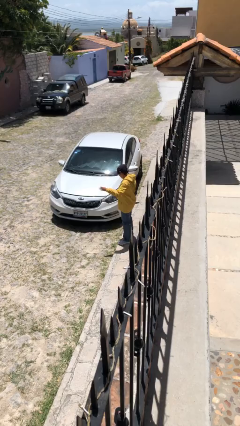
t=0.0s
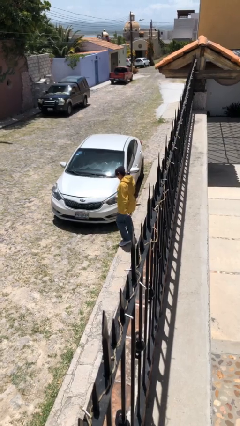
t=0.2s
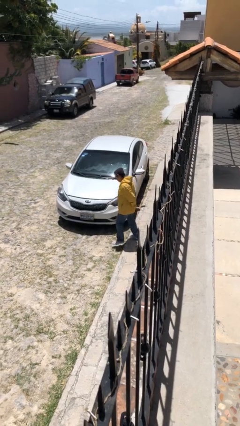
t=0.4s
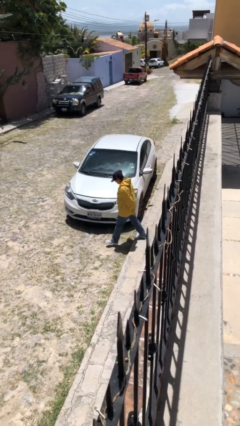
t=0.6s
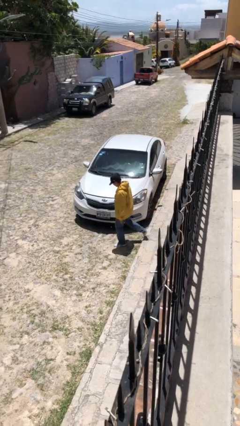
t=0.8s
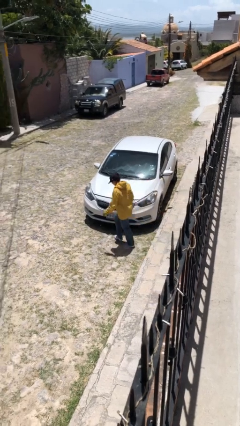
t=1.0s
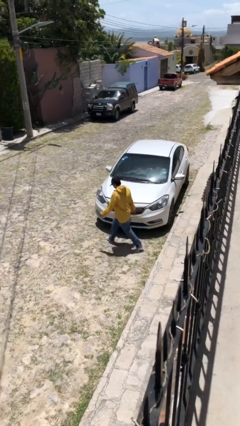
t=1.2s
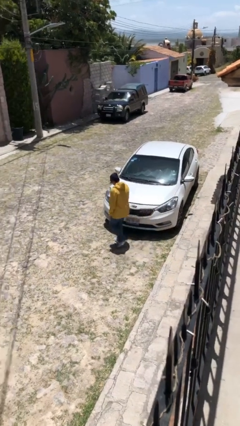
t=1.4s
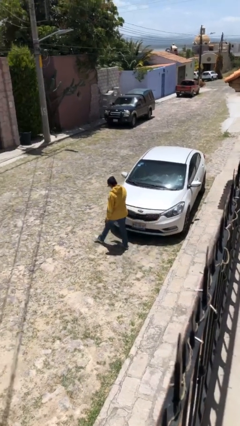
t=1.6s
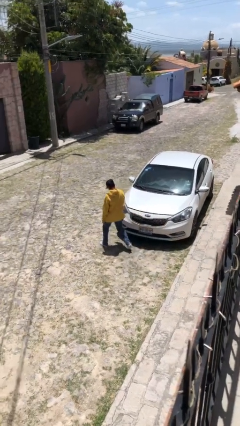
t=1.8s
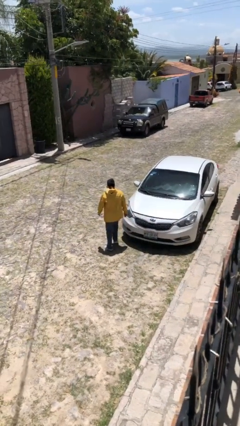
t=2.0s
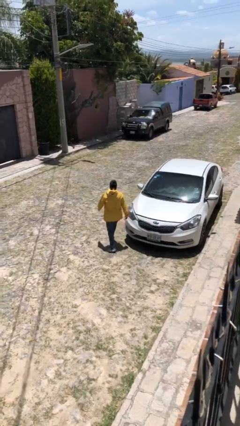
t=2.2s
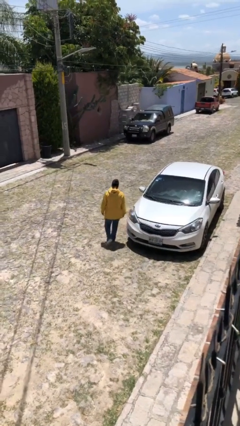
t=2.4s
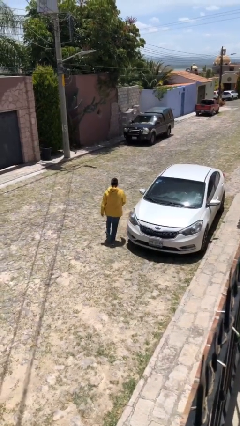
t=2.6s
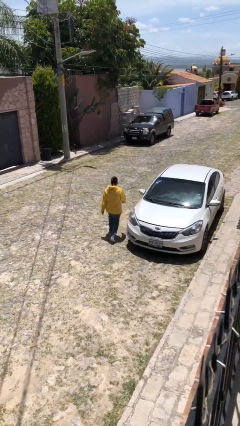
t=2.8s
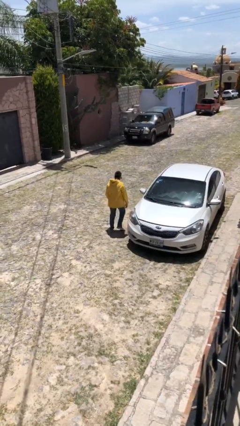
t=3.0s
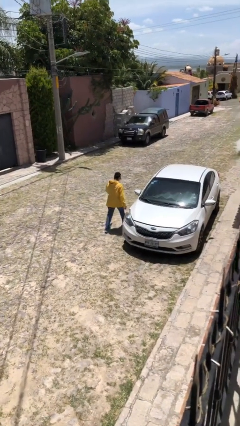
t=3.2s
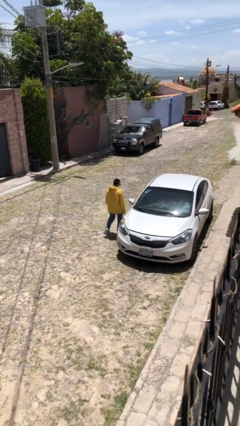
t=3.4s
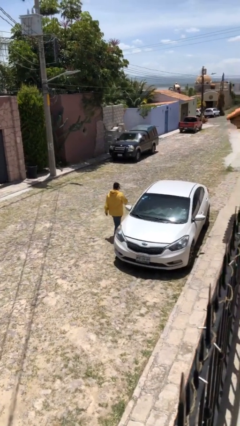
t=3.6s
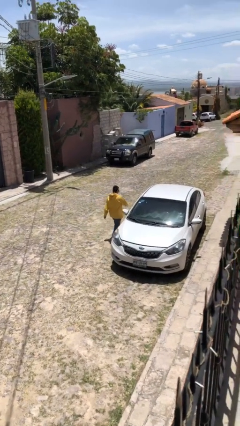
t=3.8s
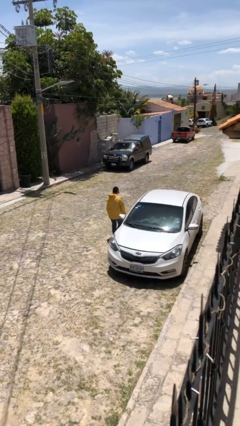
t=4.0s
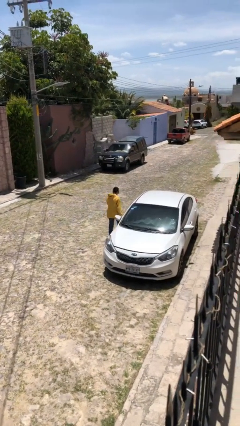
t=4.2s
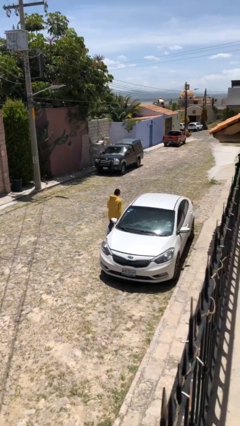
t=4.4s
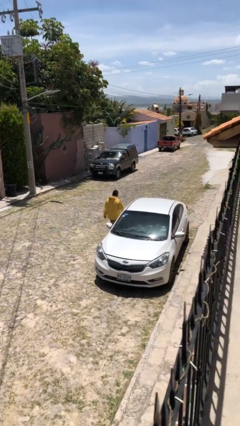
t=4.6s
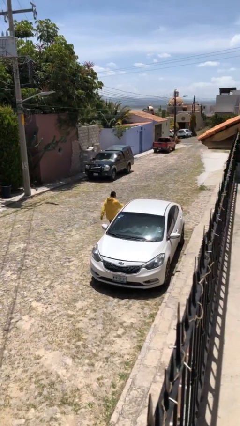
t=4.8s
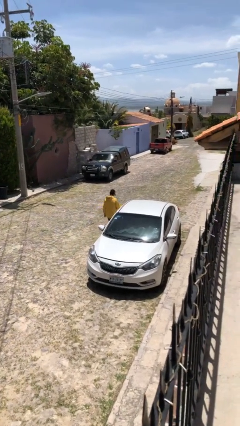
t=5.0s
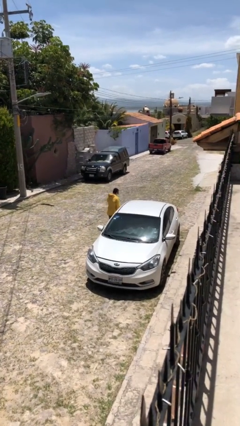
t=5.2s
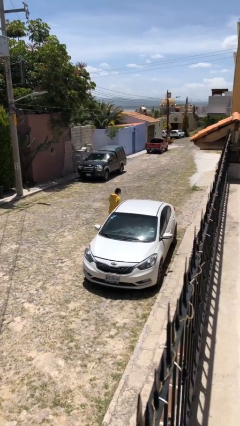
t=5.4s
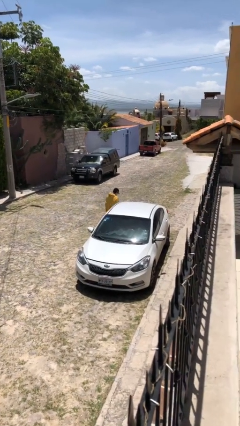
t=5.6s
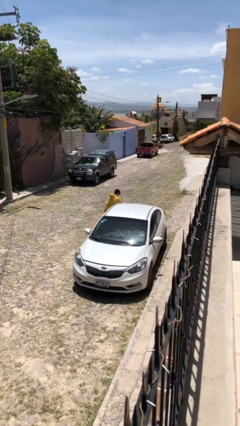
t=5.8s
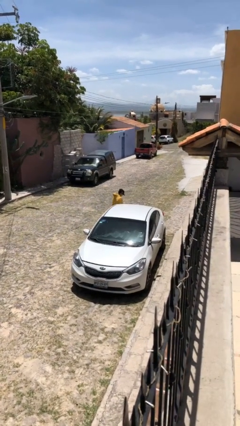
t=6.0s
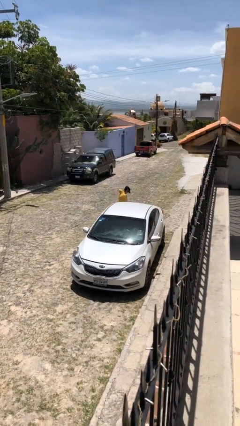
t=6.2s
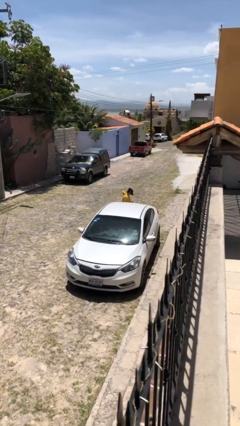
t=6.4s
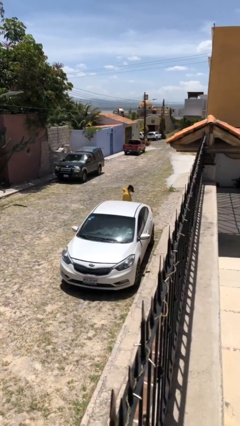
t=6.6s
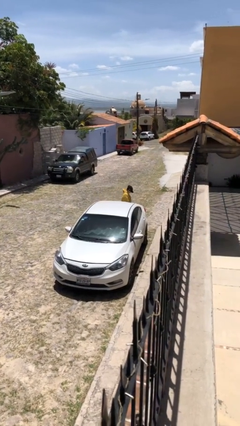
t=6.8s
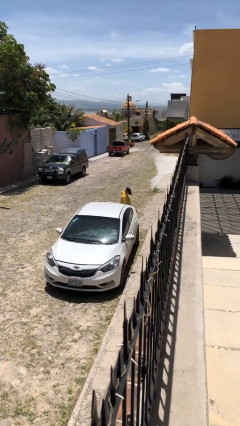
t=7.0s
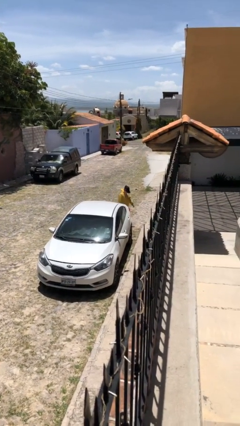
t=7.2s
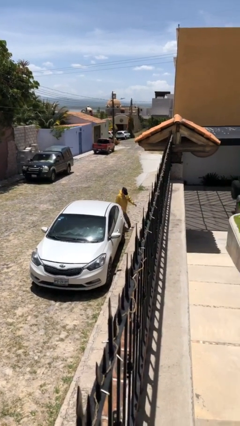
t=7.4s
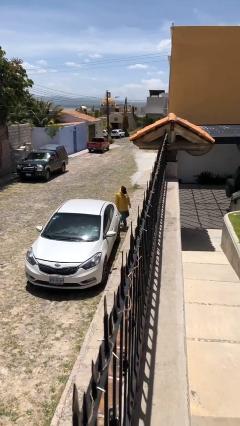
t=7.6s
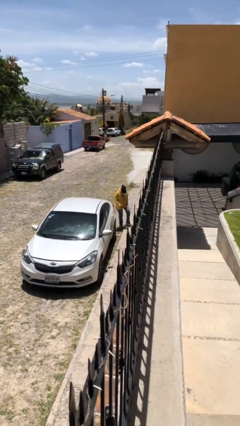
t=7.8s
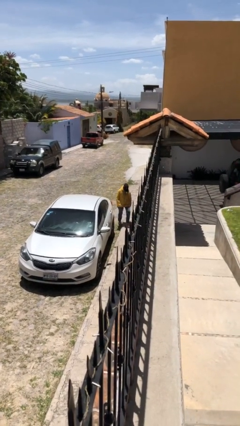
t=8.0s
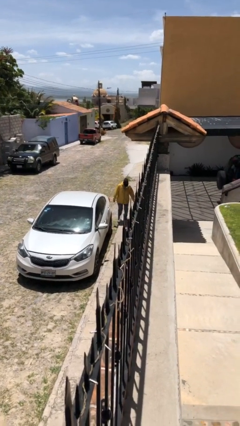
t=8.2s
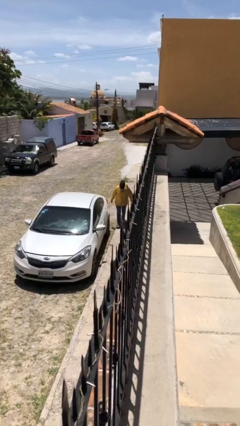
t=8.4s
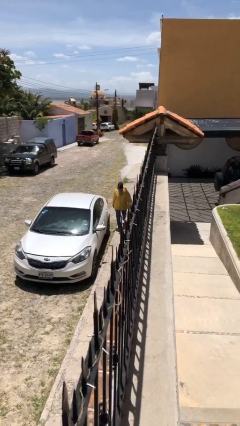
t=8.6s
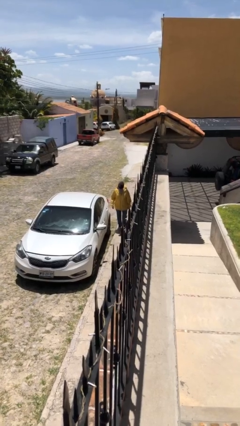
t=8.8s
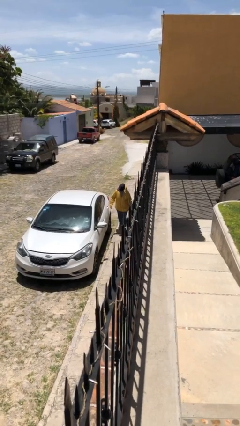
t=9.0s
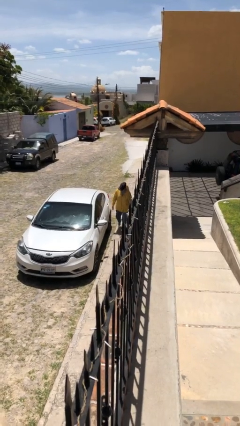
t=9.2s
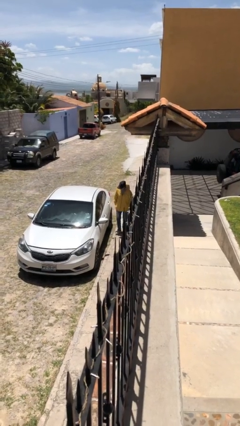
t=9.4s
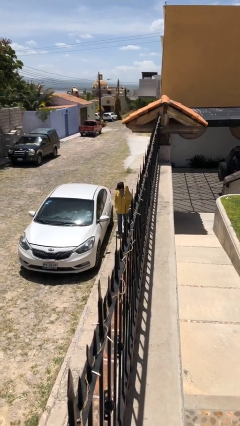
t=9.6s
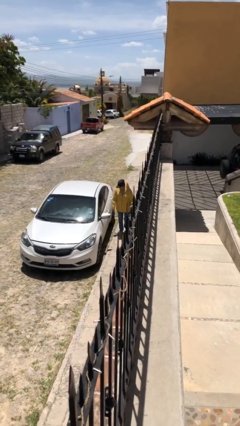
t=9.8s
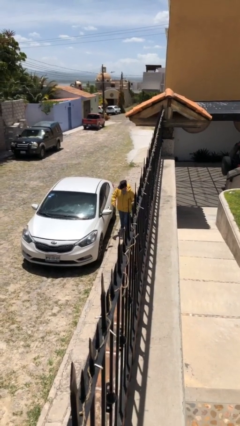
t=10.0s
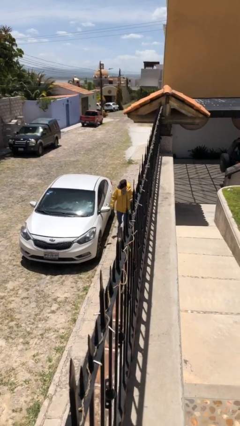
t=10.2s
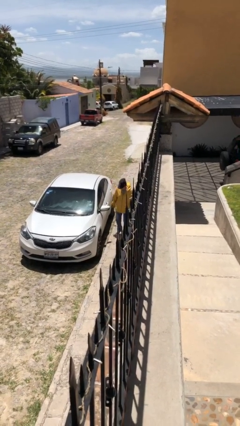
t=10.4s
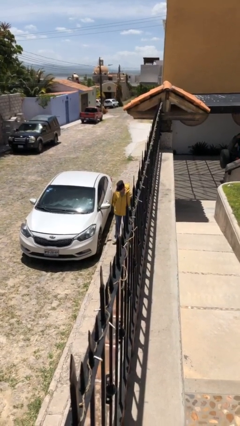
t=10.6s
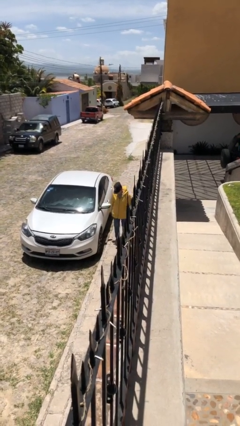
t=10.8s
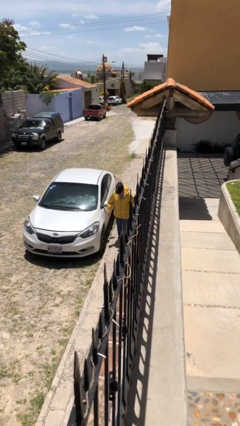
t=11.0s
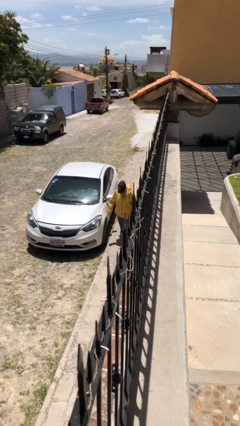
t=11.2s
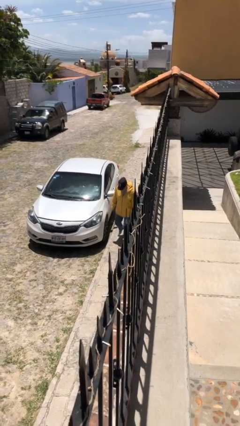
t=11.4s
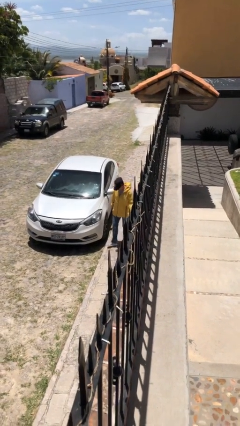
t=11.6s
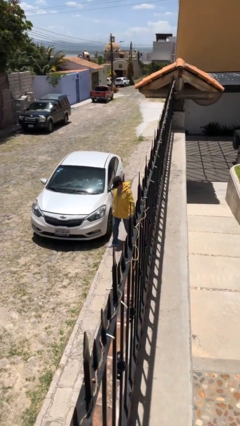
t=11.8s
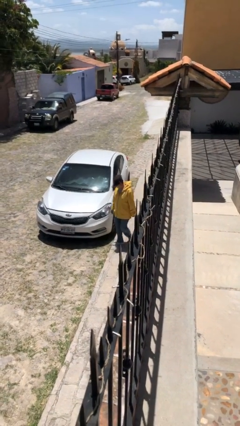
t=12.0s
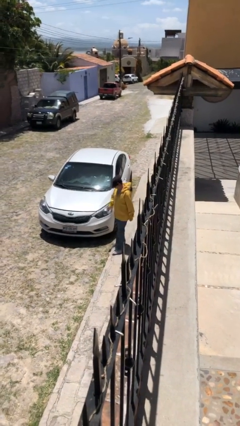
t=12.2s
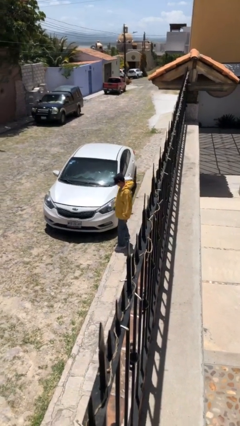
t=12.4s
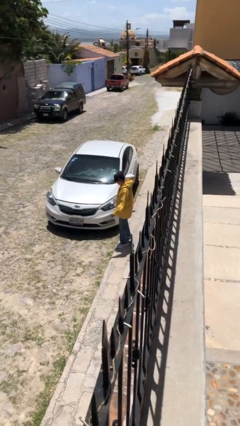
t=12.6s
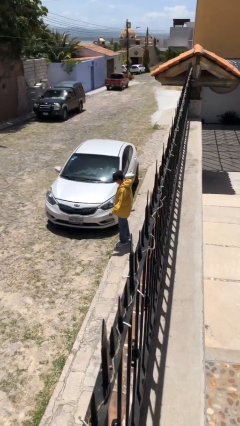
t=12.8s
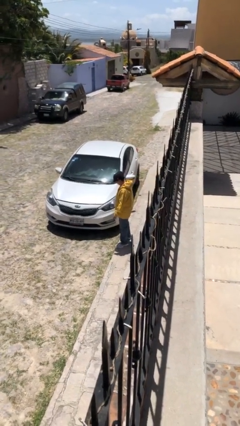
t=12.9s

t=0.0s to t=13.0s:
person walks around car

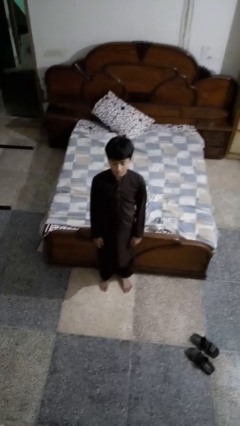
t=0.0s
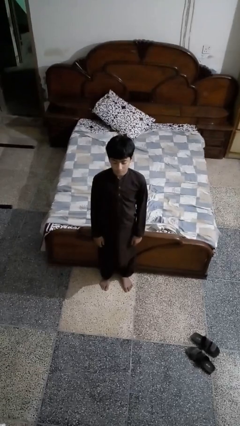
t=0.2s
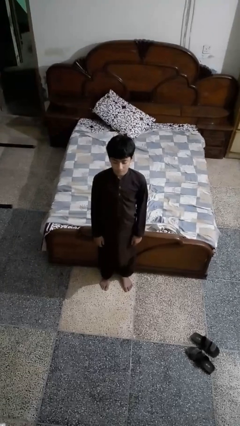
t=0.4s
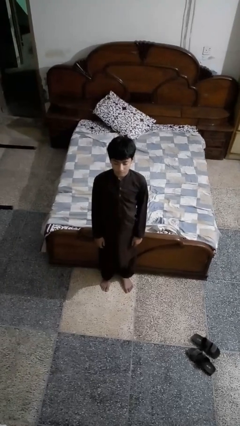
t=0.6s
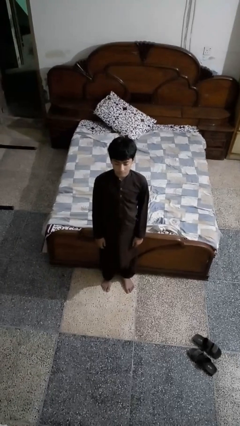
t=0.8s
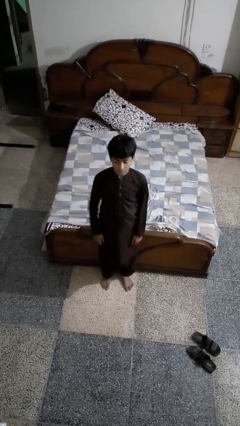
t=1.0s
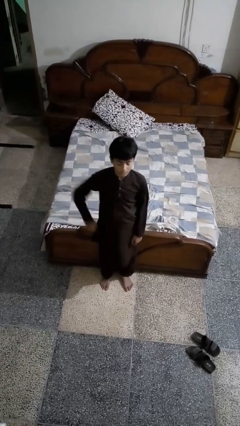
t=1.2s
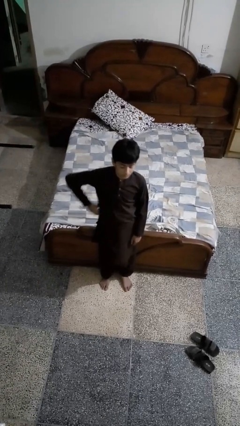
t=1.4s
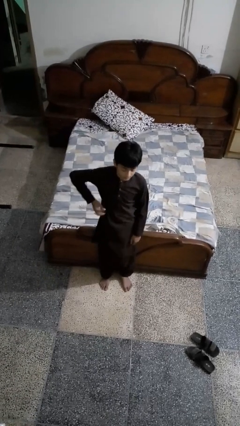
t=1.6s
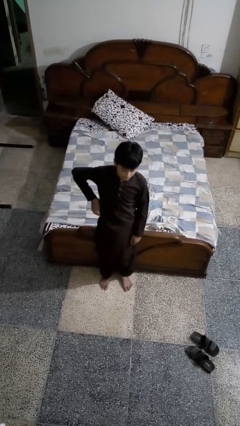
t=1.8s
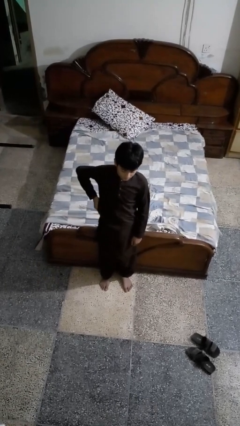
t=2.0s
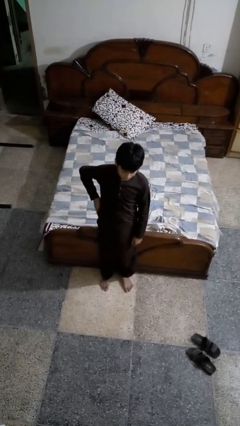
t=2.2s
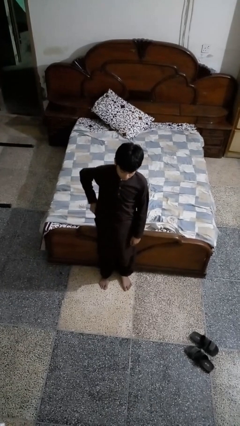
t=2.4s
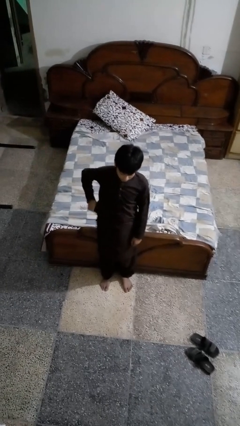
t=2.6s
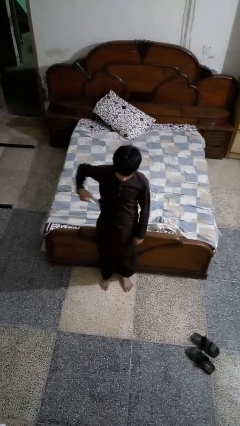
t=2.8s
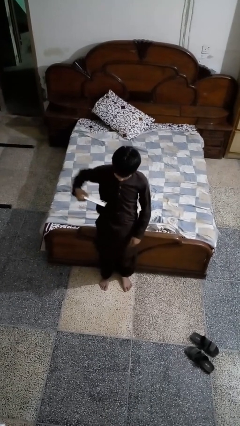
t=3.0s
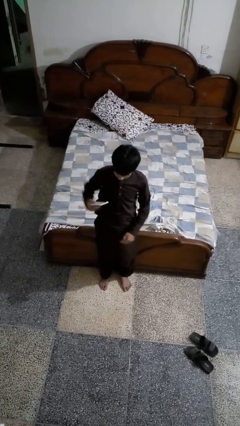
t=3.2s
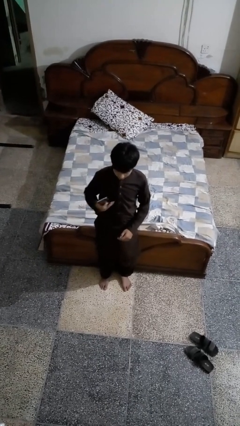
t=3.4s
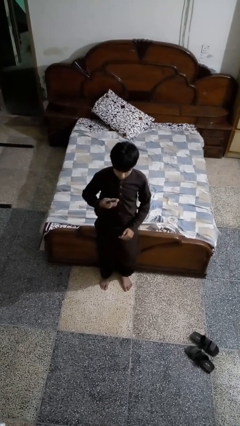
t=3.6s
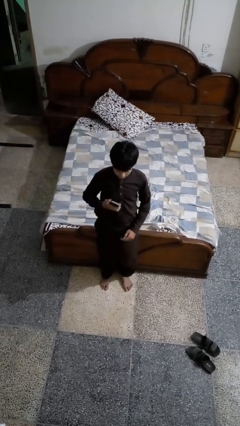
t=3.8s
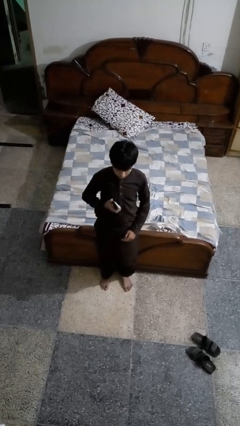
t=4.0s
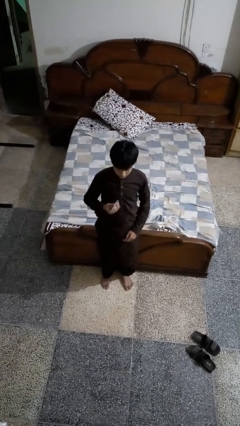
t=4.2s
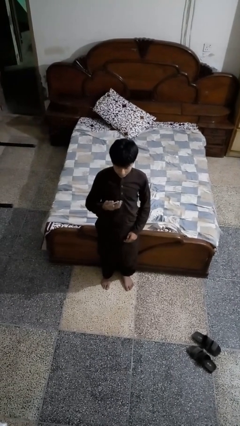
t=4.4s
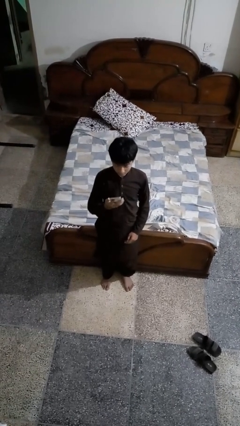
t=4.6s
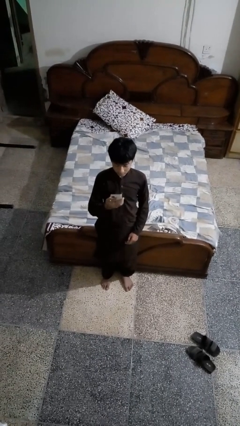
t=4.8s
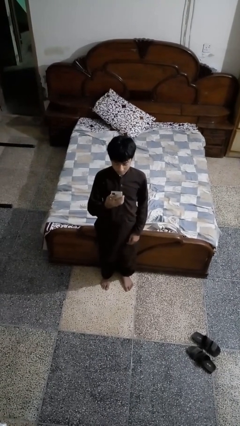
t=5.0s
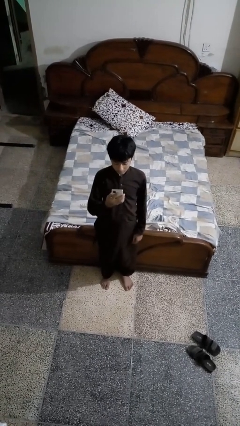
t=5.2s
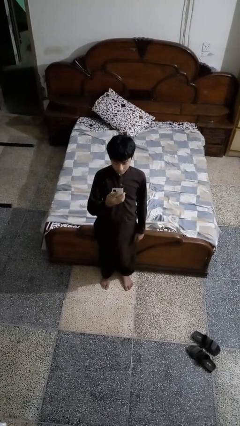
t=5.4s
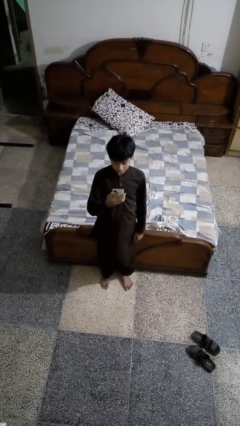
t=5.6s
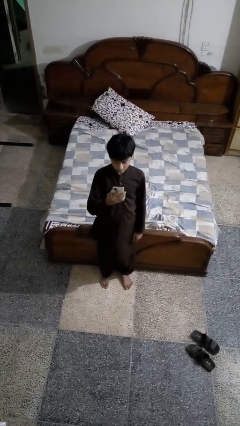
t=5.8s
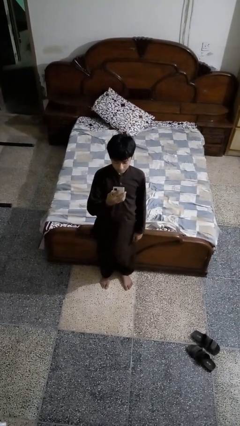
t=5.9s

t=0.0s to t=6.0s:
person takes phone from pocket
